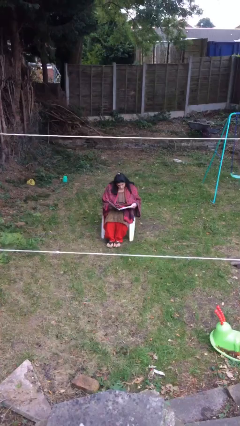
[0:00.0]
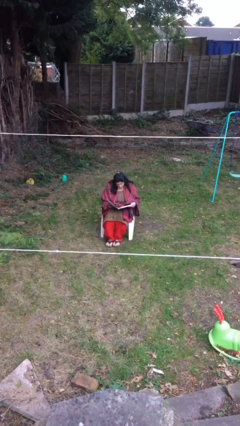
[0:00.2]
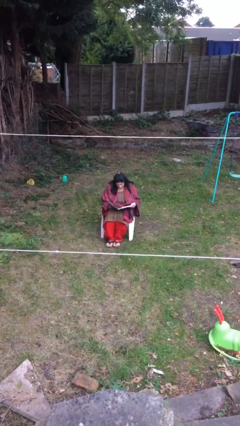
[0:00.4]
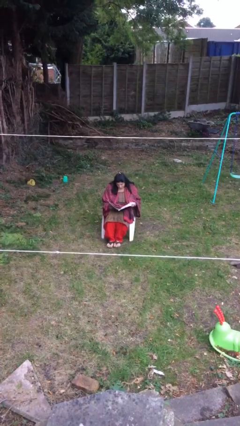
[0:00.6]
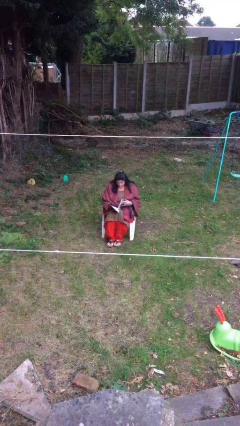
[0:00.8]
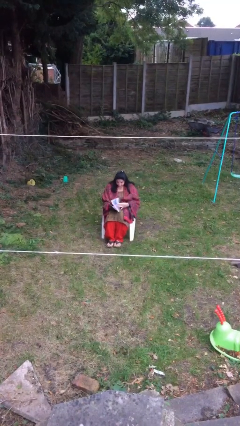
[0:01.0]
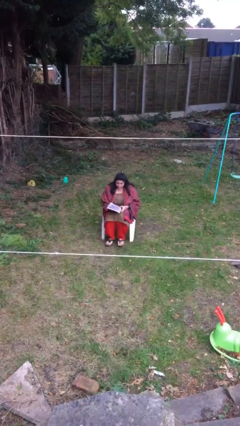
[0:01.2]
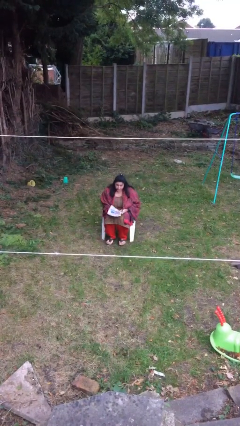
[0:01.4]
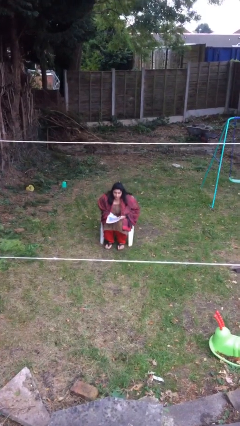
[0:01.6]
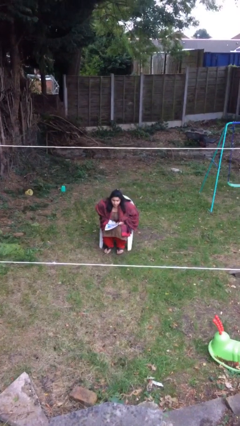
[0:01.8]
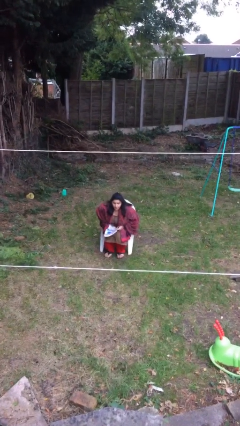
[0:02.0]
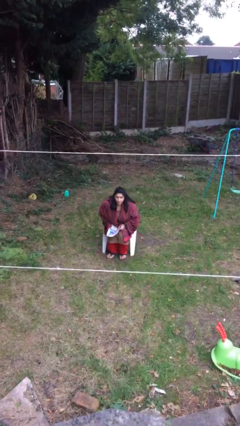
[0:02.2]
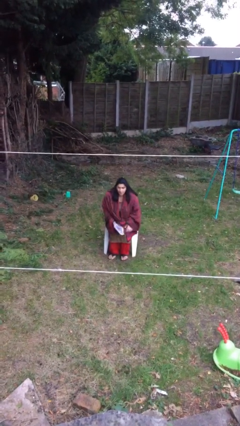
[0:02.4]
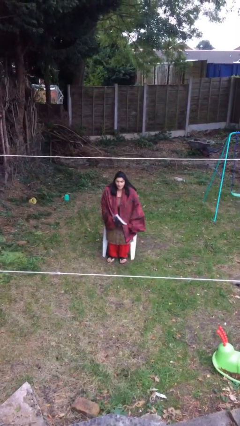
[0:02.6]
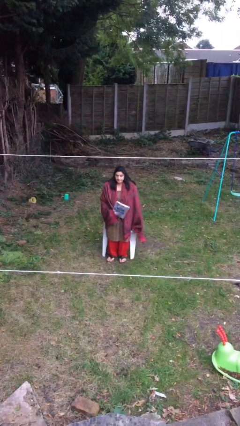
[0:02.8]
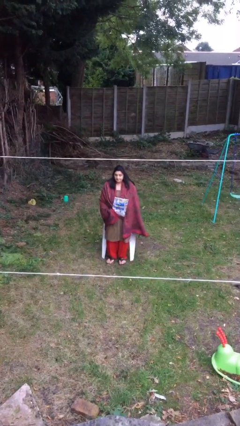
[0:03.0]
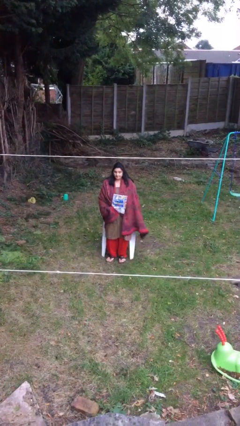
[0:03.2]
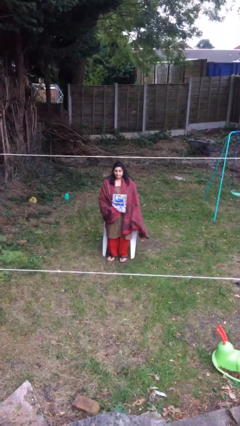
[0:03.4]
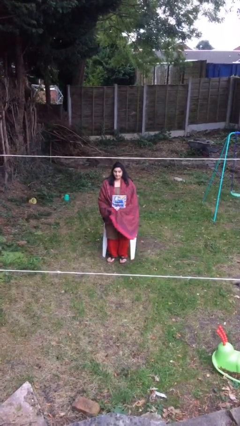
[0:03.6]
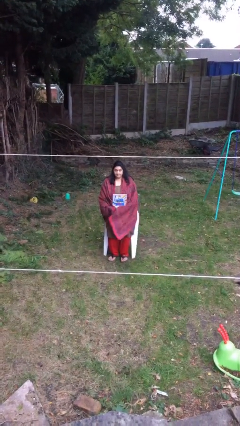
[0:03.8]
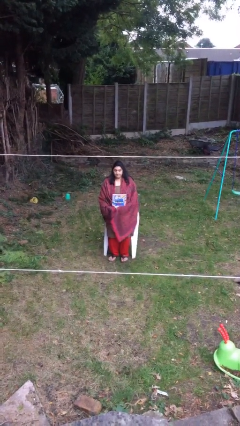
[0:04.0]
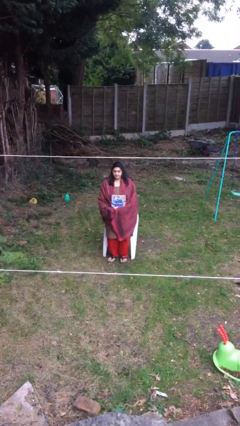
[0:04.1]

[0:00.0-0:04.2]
person stands up

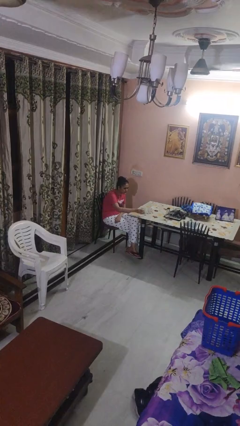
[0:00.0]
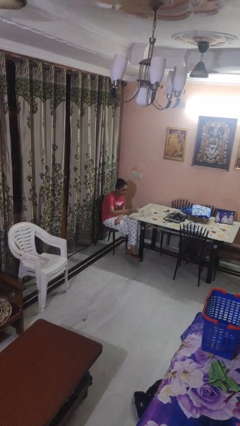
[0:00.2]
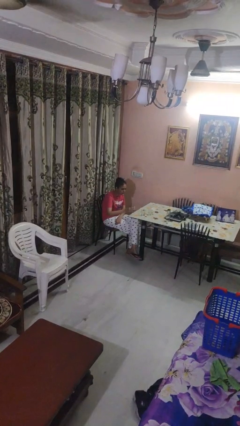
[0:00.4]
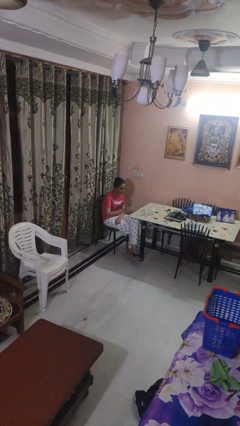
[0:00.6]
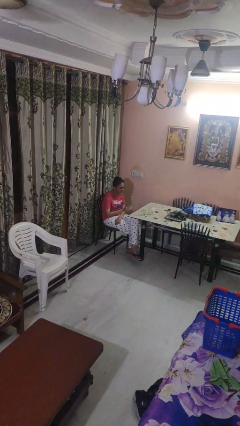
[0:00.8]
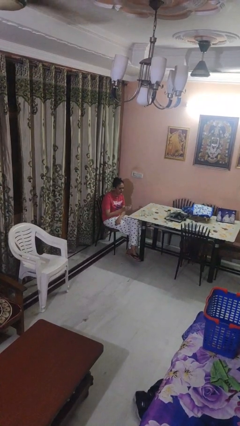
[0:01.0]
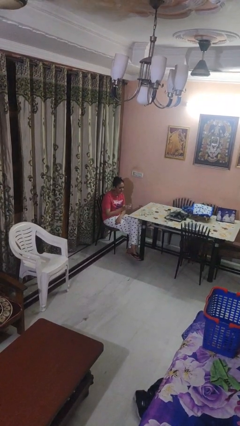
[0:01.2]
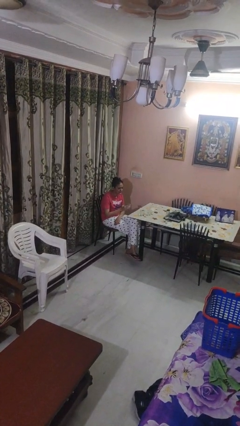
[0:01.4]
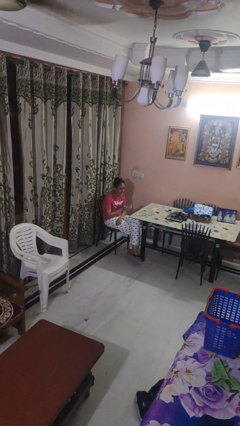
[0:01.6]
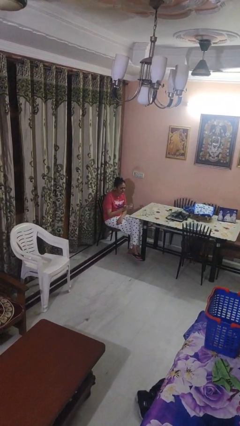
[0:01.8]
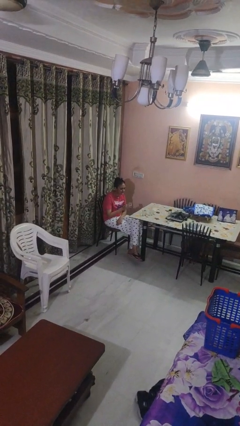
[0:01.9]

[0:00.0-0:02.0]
person picks up object from table

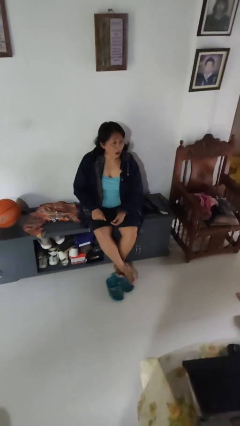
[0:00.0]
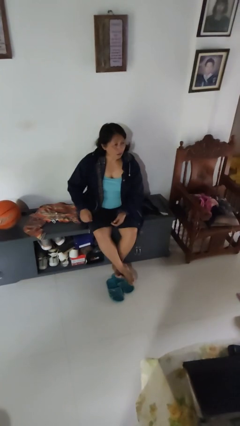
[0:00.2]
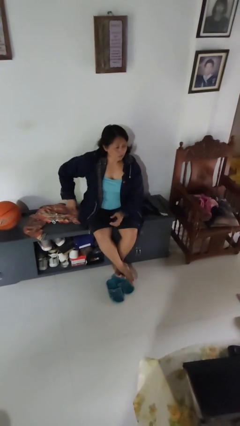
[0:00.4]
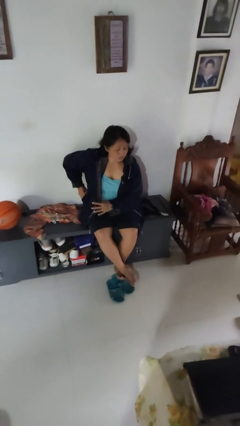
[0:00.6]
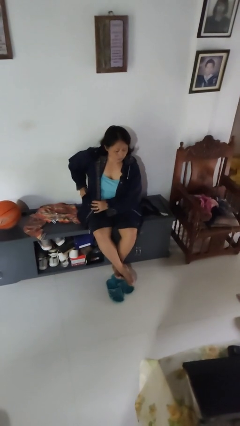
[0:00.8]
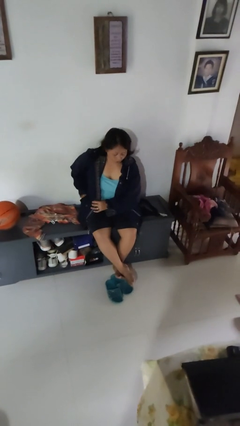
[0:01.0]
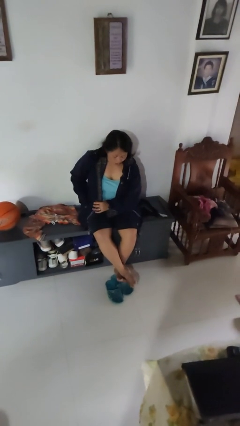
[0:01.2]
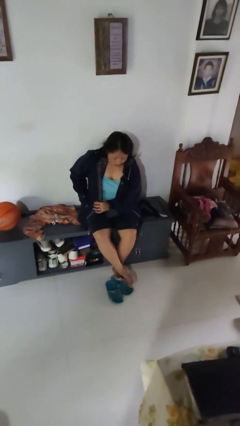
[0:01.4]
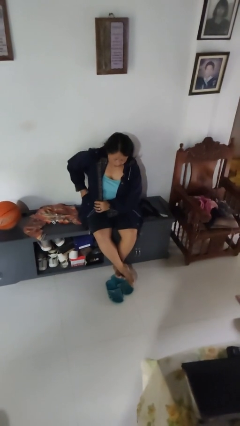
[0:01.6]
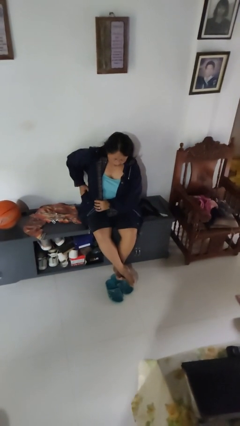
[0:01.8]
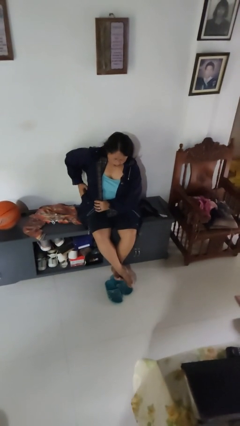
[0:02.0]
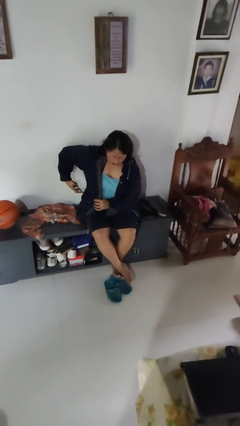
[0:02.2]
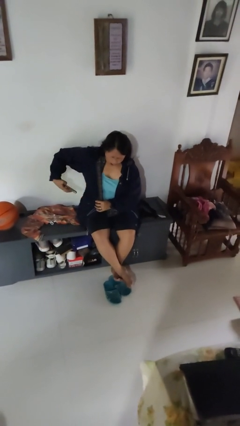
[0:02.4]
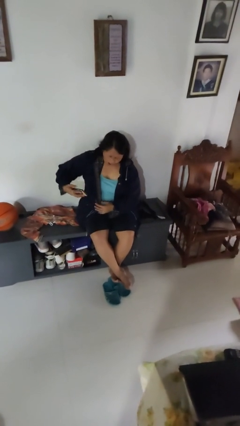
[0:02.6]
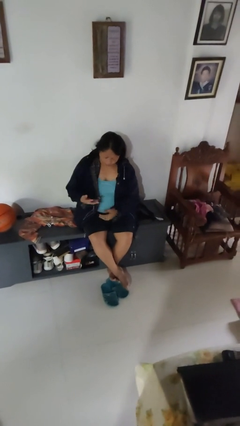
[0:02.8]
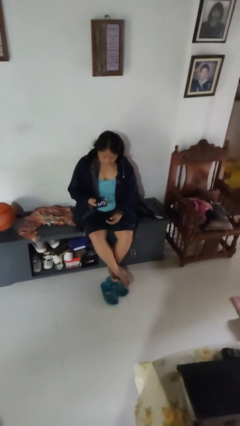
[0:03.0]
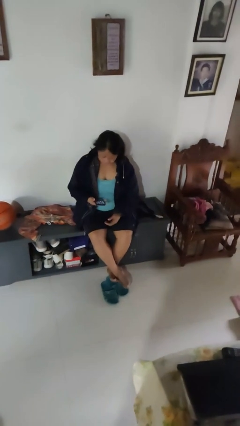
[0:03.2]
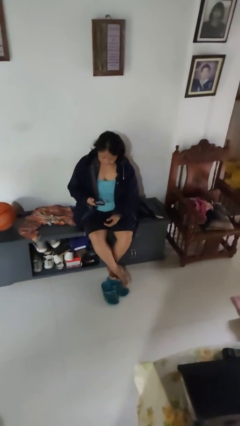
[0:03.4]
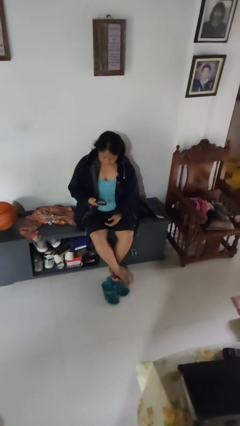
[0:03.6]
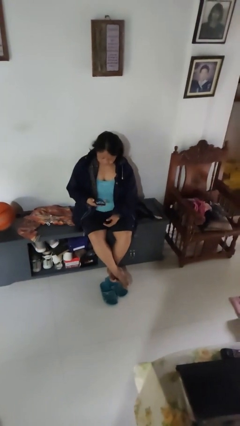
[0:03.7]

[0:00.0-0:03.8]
person takes phone from pocket

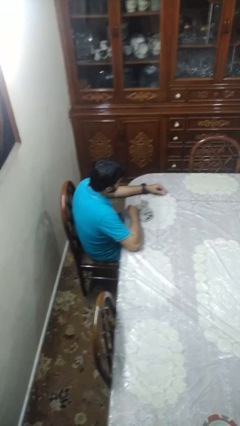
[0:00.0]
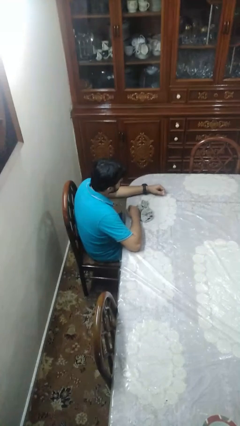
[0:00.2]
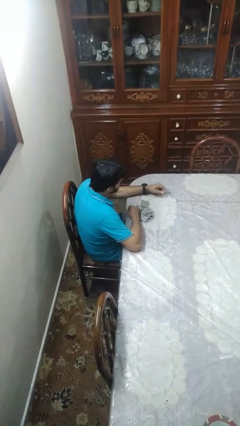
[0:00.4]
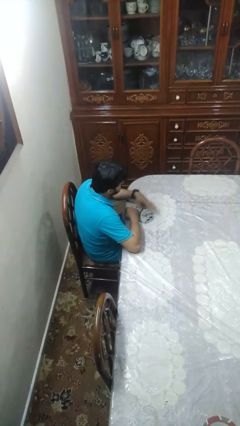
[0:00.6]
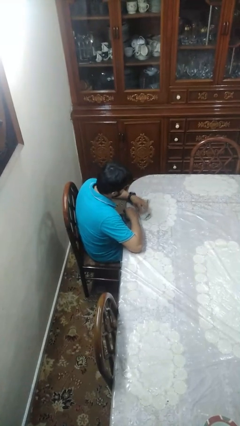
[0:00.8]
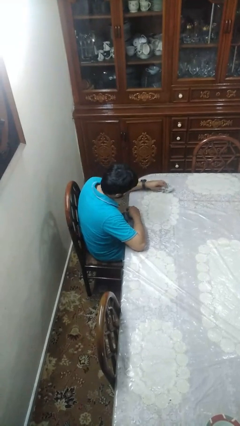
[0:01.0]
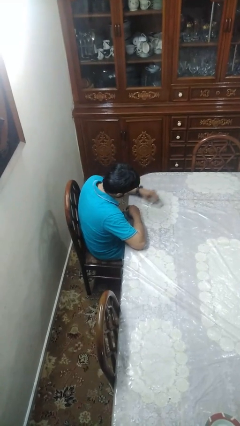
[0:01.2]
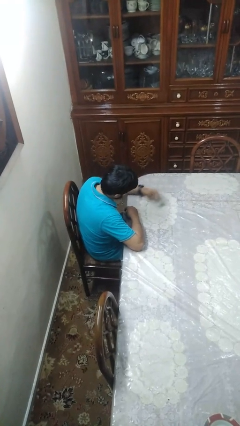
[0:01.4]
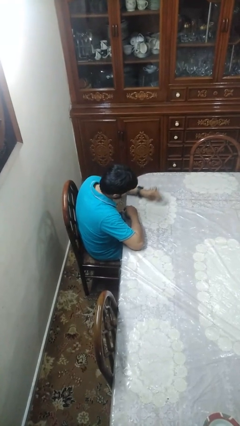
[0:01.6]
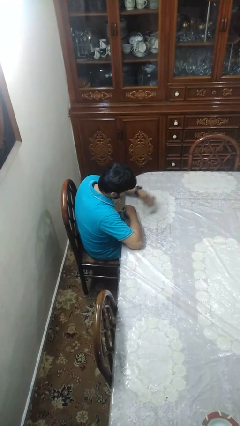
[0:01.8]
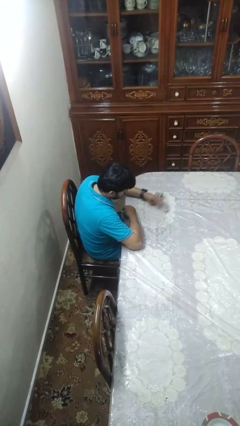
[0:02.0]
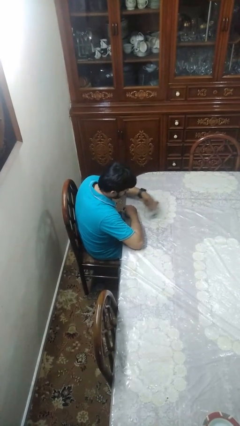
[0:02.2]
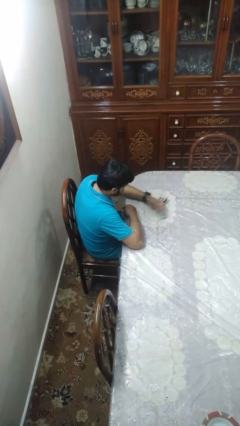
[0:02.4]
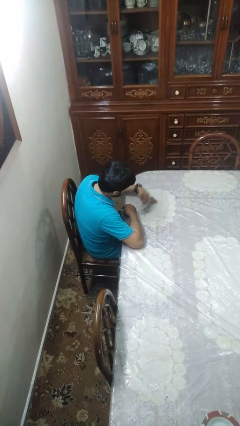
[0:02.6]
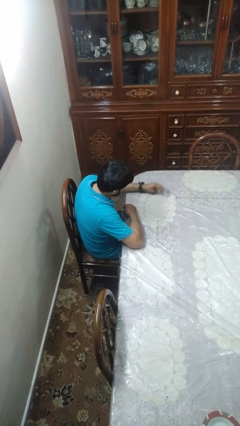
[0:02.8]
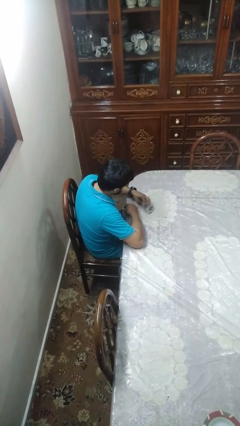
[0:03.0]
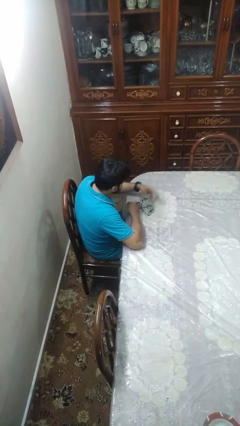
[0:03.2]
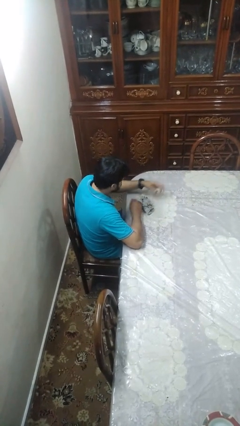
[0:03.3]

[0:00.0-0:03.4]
person cleans table with rag

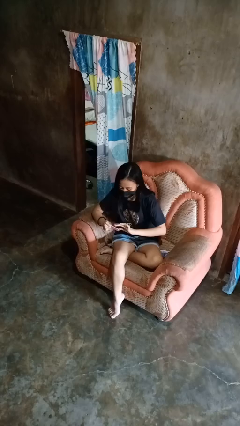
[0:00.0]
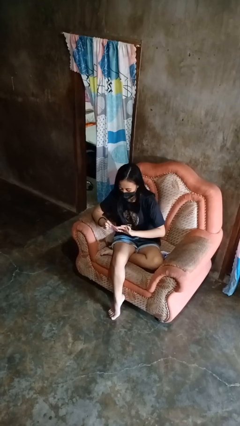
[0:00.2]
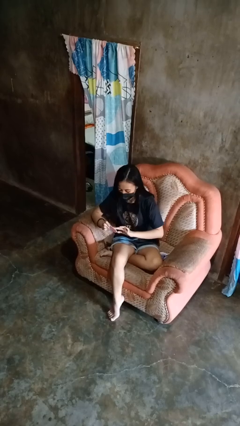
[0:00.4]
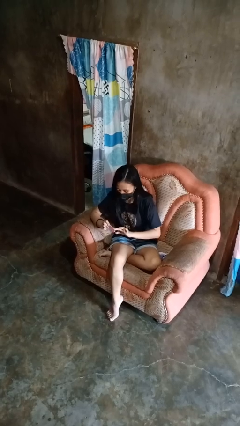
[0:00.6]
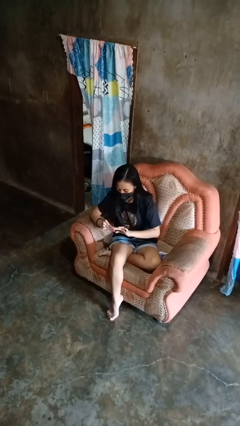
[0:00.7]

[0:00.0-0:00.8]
person files fingernails

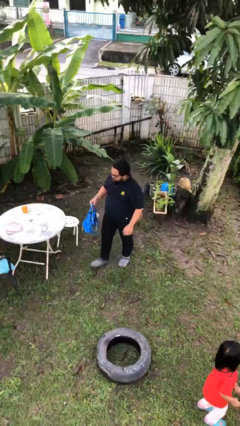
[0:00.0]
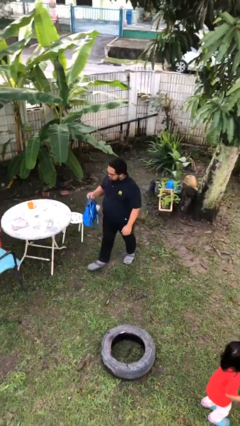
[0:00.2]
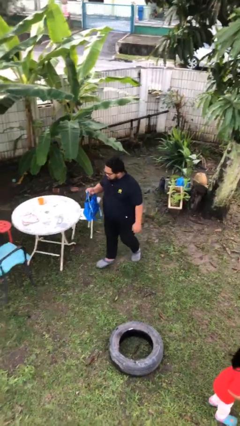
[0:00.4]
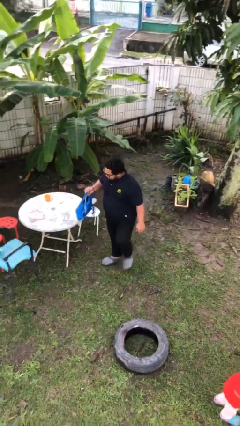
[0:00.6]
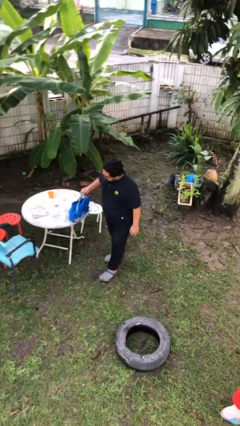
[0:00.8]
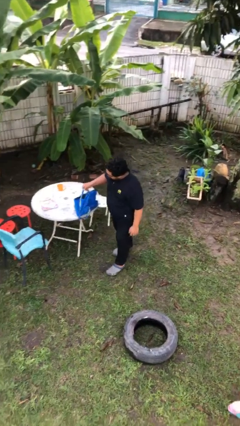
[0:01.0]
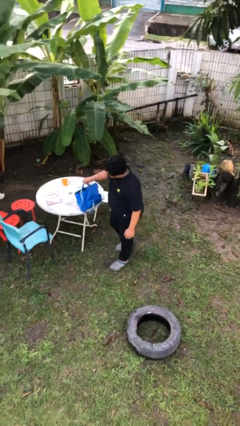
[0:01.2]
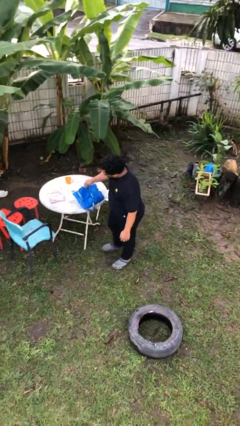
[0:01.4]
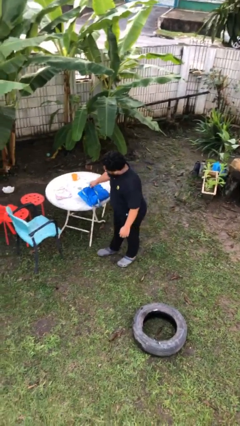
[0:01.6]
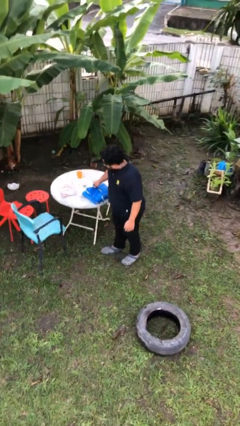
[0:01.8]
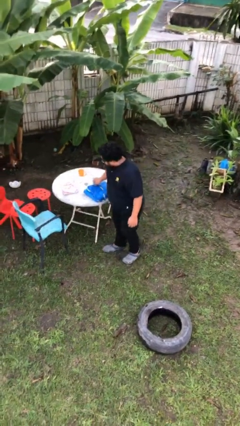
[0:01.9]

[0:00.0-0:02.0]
person puts down object on table

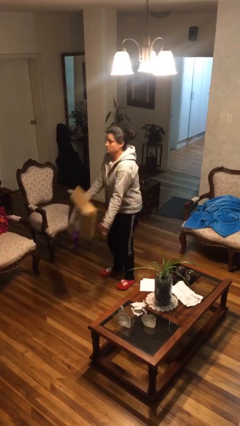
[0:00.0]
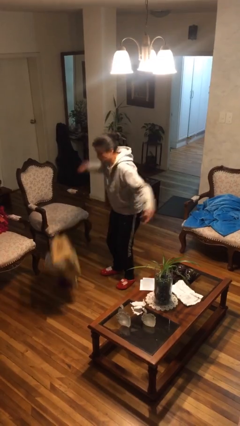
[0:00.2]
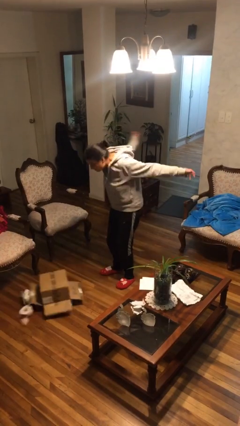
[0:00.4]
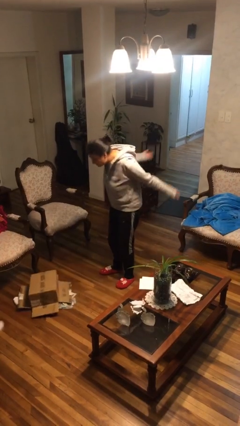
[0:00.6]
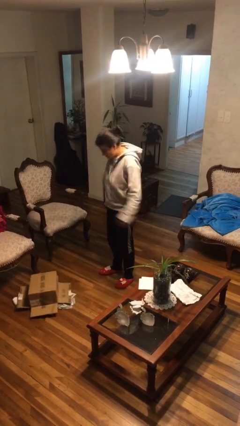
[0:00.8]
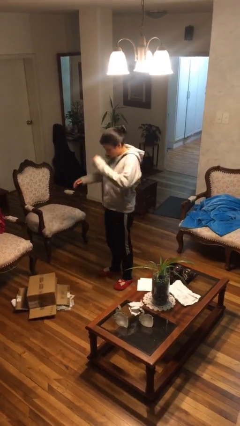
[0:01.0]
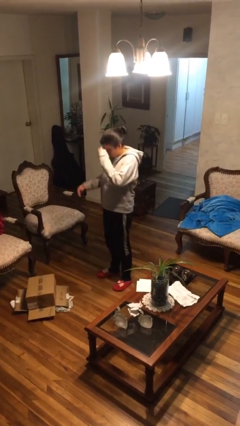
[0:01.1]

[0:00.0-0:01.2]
person unloads box onto floor
